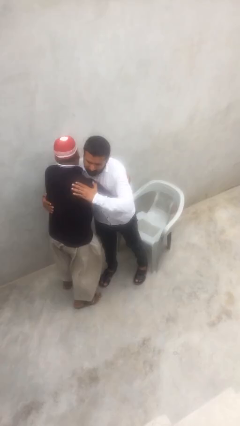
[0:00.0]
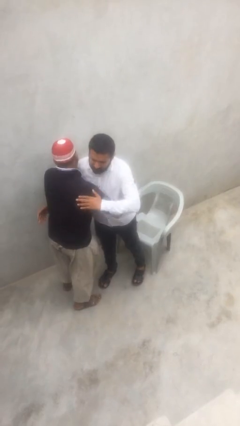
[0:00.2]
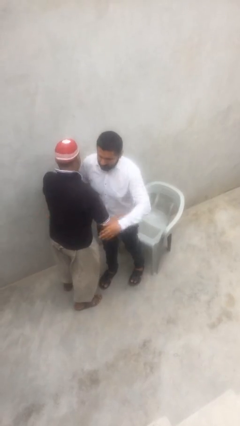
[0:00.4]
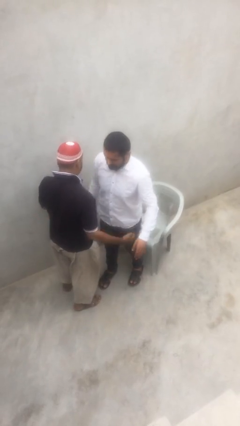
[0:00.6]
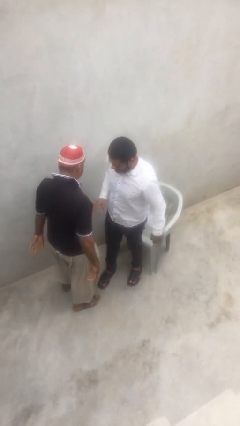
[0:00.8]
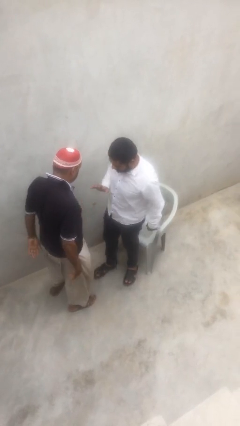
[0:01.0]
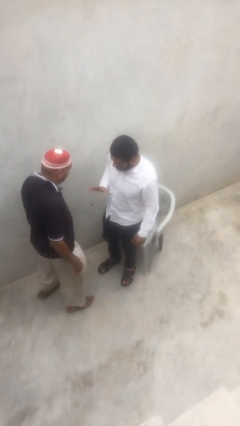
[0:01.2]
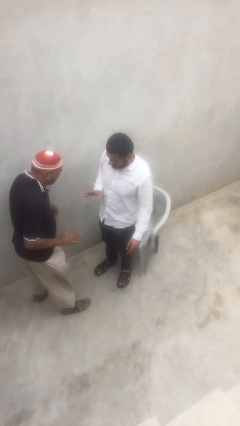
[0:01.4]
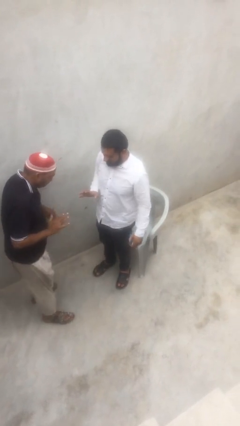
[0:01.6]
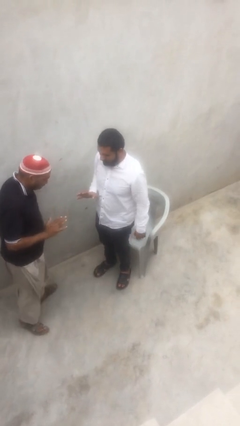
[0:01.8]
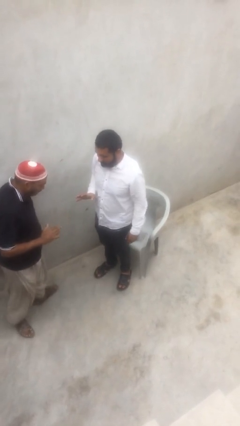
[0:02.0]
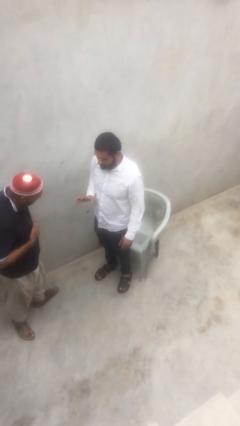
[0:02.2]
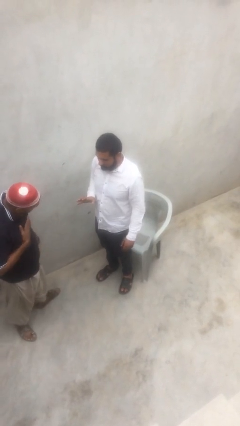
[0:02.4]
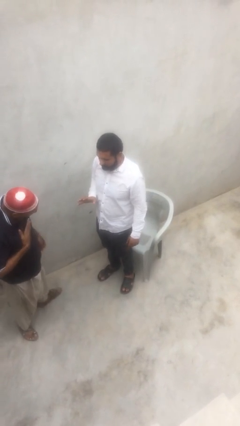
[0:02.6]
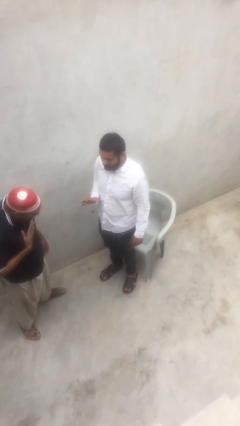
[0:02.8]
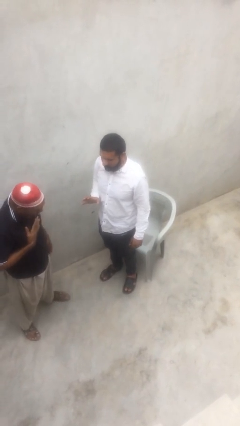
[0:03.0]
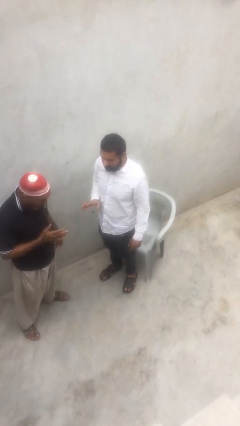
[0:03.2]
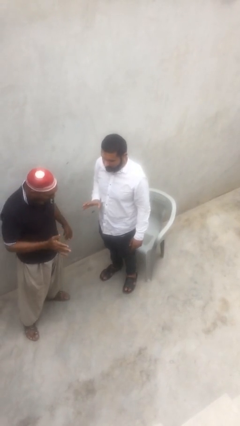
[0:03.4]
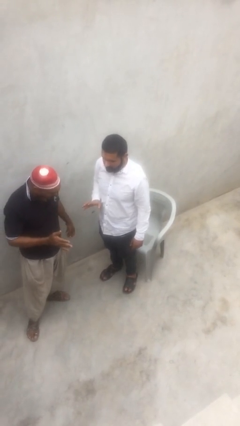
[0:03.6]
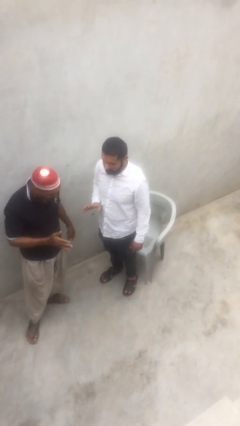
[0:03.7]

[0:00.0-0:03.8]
person talks to person

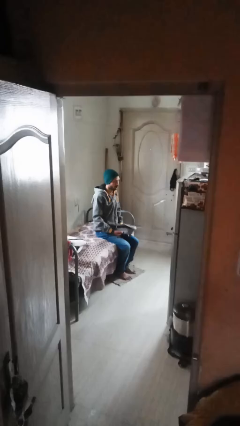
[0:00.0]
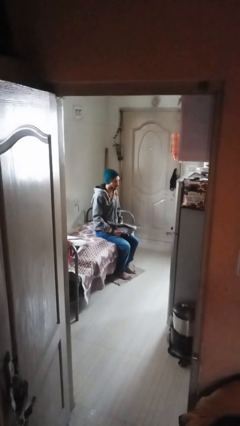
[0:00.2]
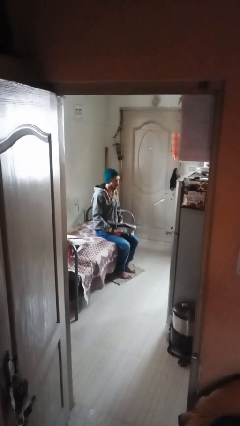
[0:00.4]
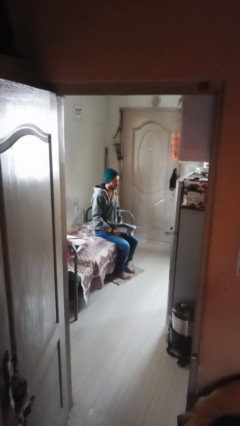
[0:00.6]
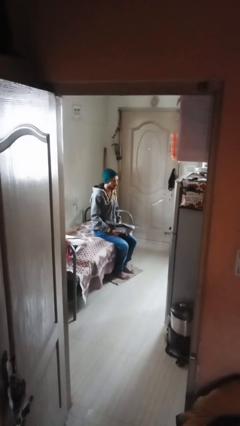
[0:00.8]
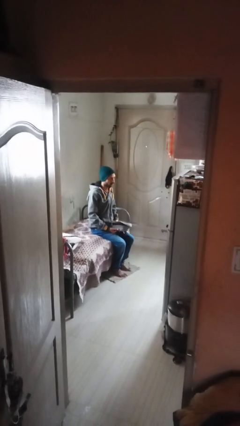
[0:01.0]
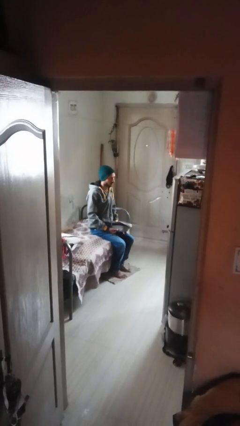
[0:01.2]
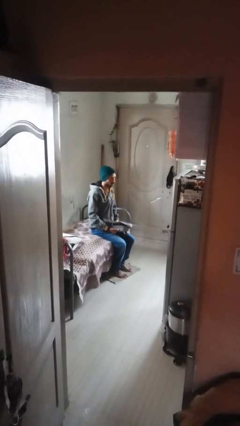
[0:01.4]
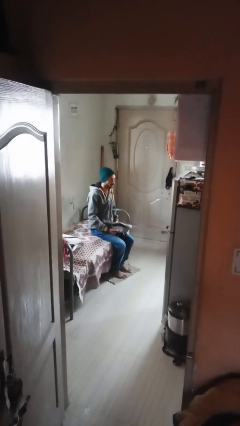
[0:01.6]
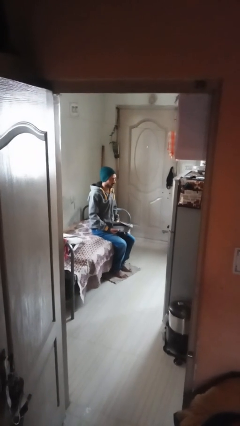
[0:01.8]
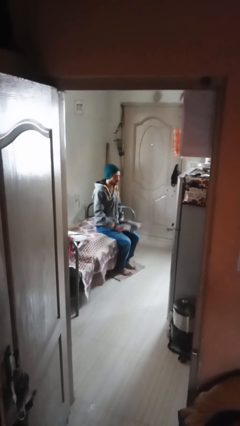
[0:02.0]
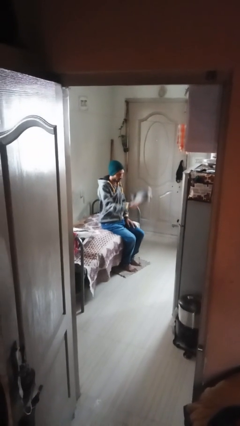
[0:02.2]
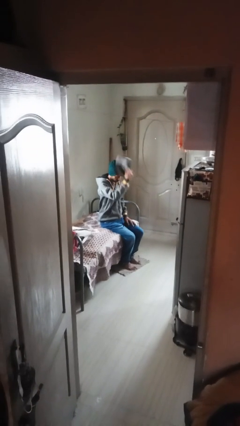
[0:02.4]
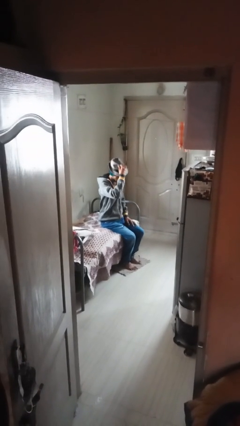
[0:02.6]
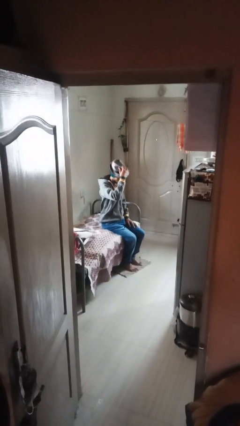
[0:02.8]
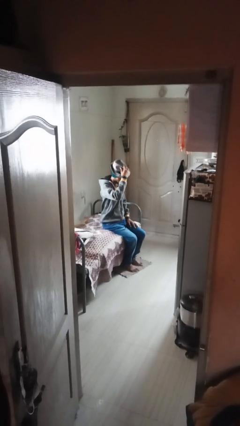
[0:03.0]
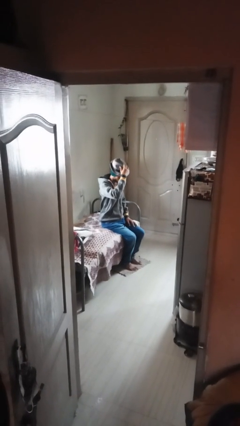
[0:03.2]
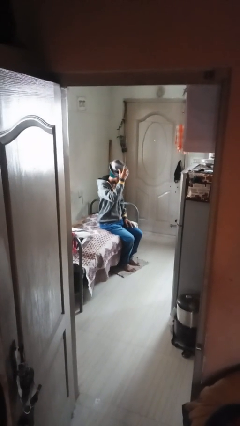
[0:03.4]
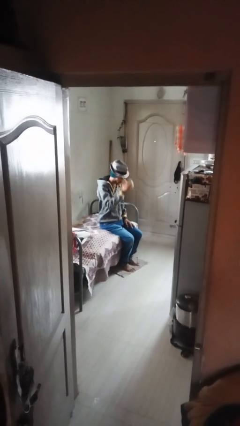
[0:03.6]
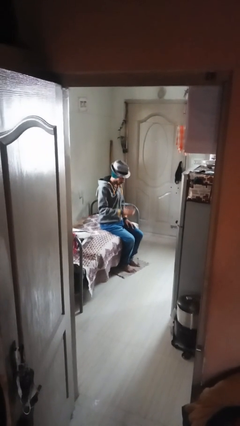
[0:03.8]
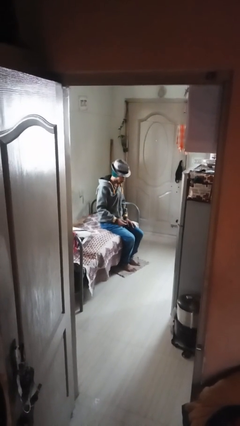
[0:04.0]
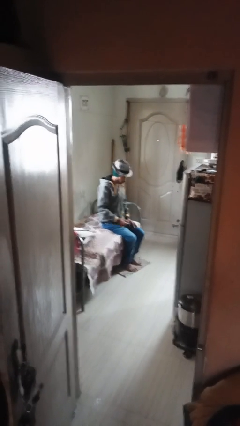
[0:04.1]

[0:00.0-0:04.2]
person puts on hat

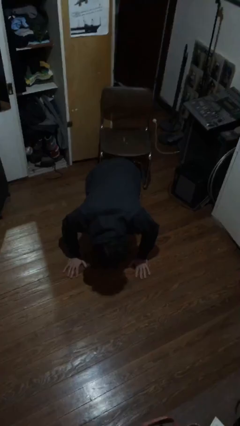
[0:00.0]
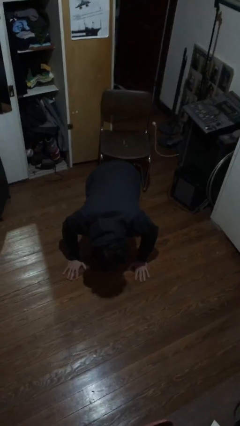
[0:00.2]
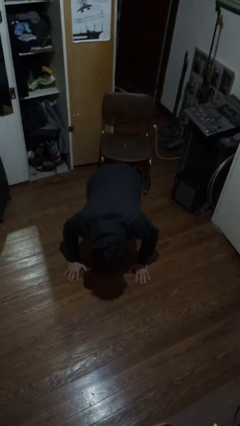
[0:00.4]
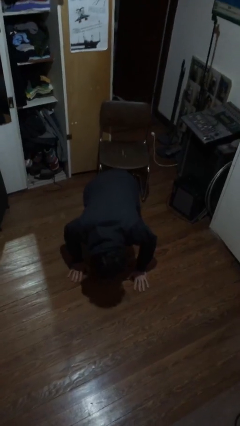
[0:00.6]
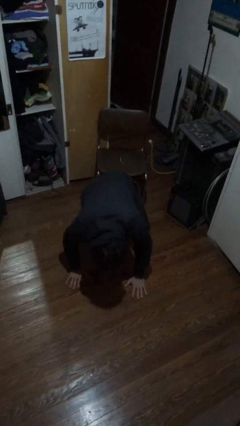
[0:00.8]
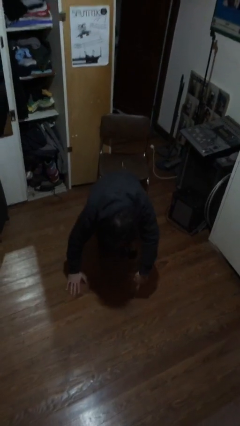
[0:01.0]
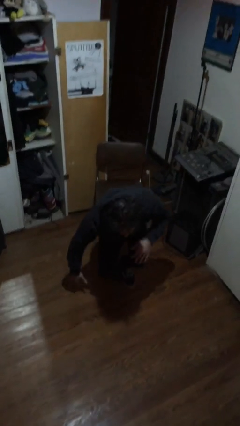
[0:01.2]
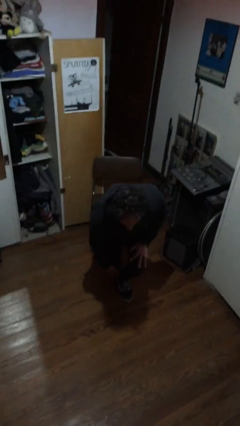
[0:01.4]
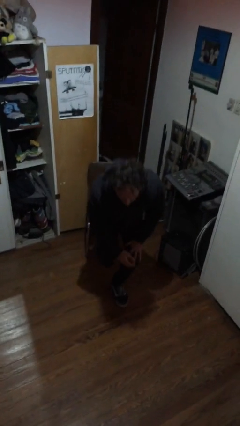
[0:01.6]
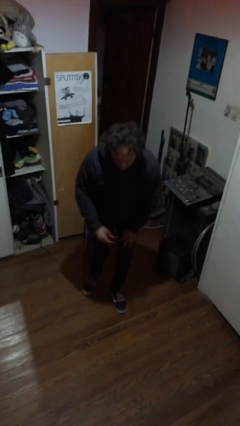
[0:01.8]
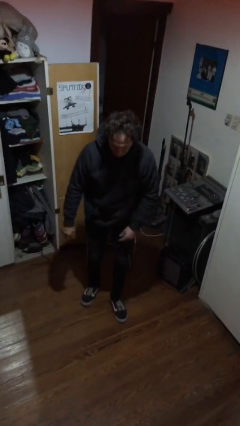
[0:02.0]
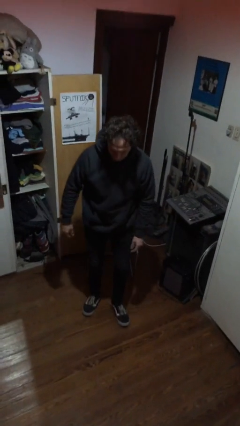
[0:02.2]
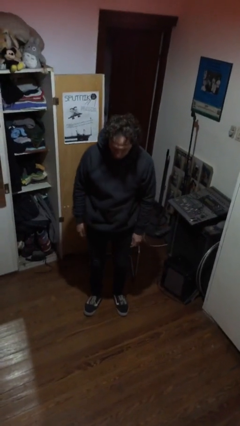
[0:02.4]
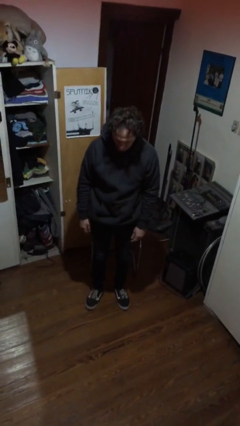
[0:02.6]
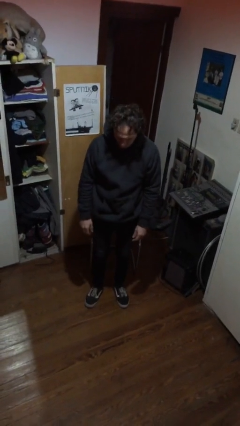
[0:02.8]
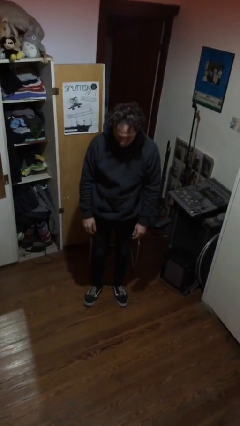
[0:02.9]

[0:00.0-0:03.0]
person stands up from floor

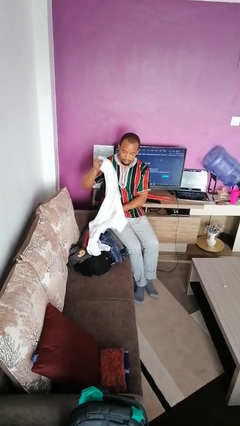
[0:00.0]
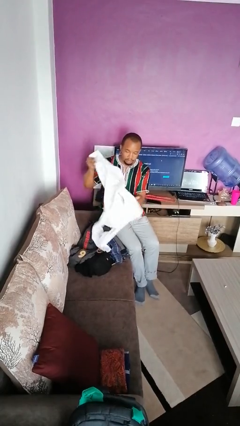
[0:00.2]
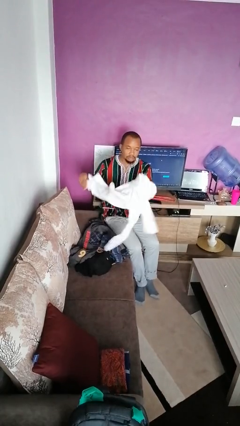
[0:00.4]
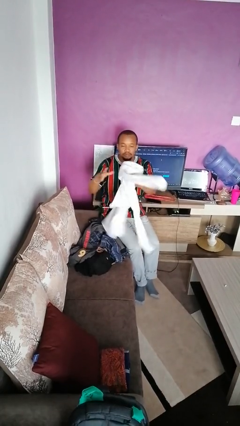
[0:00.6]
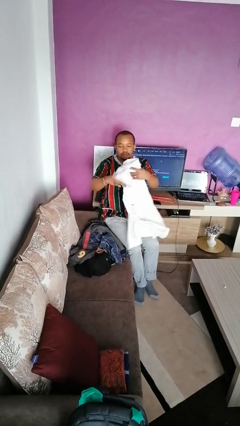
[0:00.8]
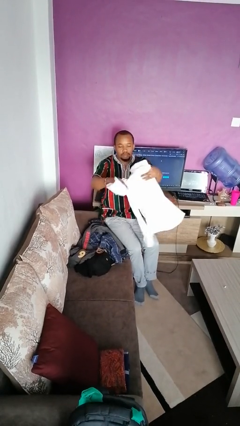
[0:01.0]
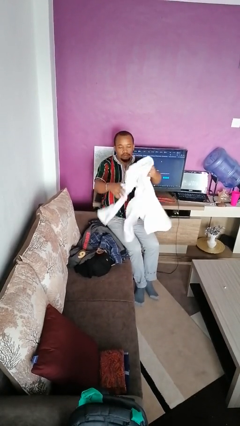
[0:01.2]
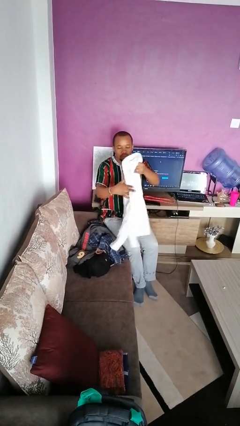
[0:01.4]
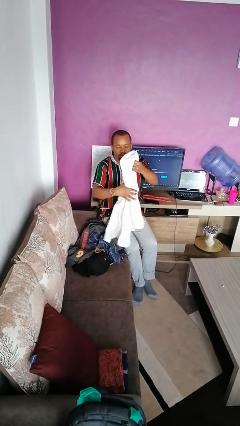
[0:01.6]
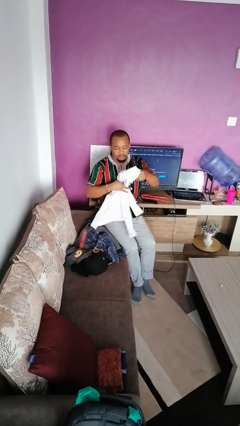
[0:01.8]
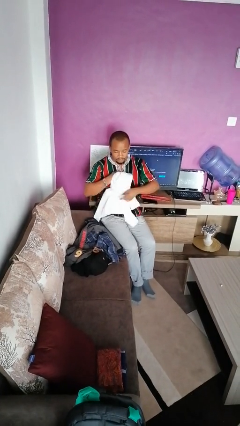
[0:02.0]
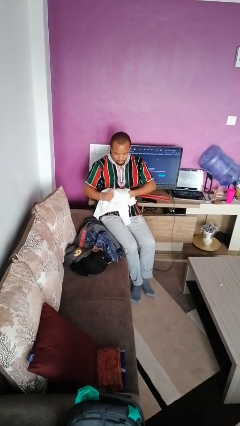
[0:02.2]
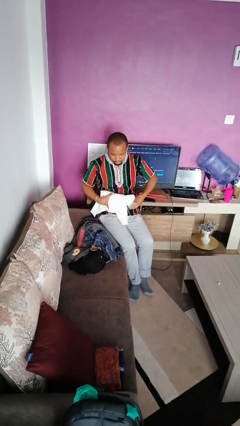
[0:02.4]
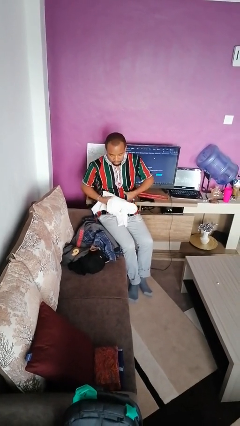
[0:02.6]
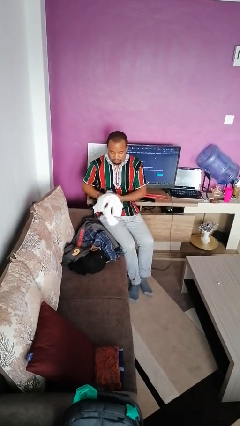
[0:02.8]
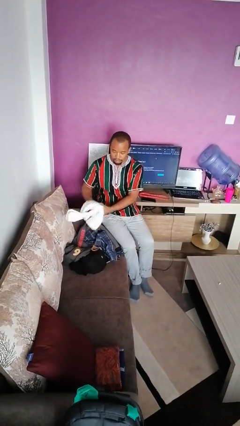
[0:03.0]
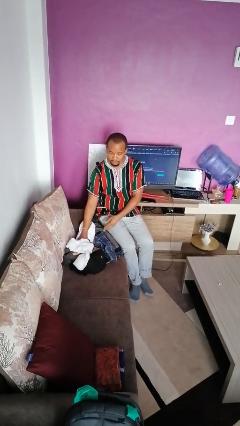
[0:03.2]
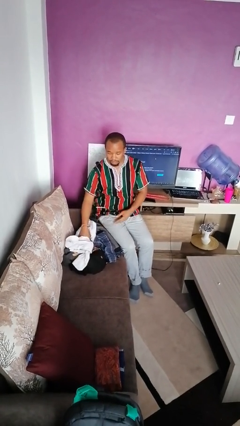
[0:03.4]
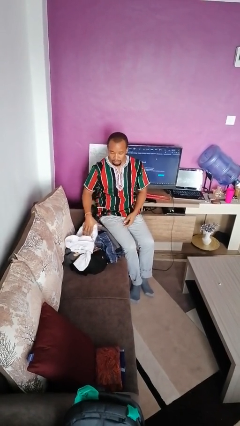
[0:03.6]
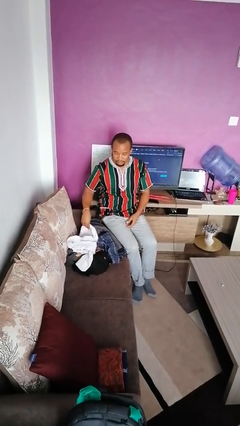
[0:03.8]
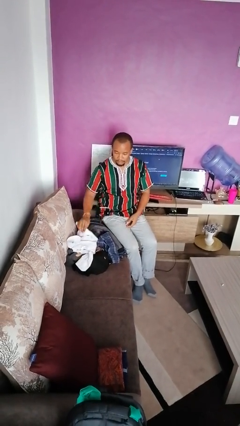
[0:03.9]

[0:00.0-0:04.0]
person folds shirt

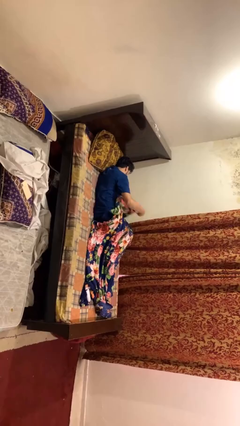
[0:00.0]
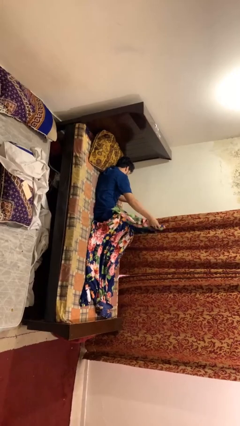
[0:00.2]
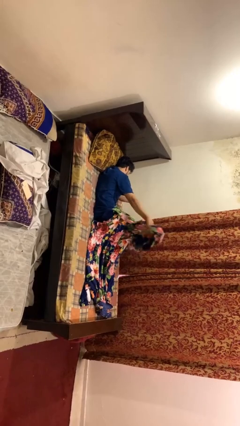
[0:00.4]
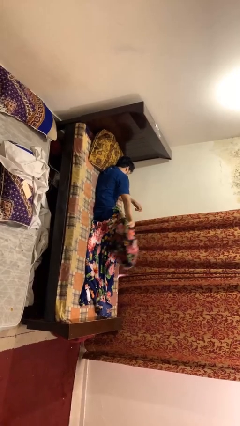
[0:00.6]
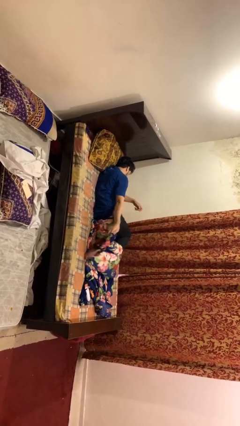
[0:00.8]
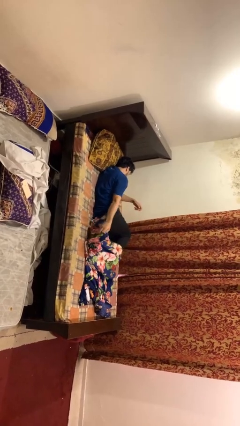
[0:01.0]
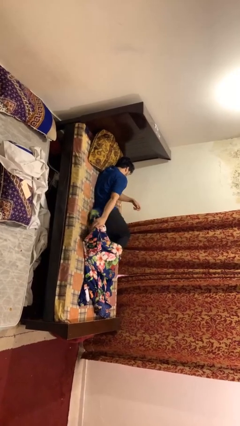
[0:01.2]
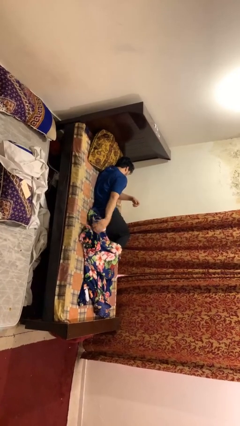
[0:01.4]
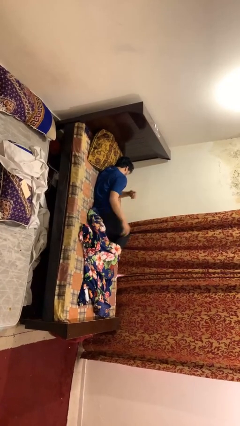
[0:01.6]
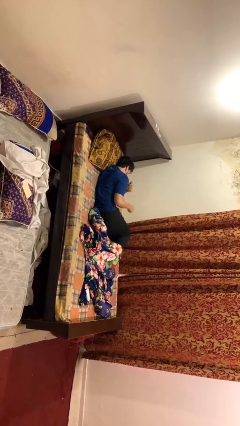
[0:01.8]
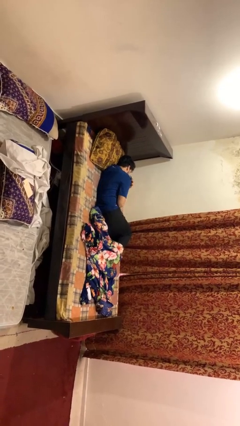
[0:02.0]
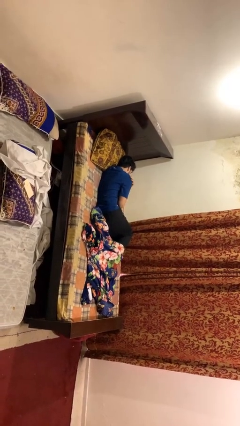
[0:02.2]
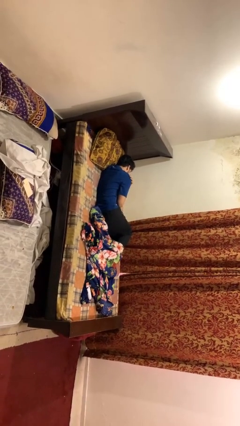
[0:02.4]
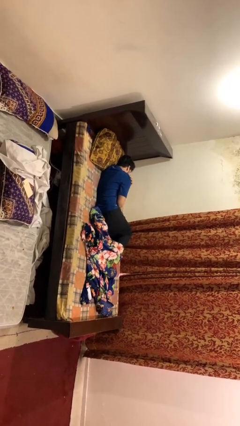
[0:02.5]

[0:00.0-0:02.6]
person uncovers with blanket
